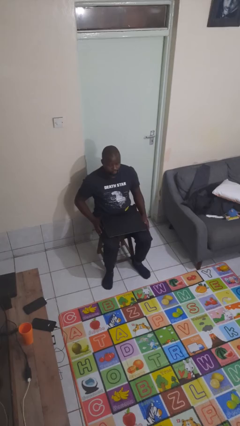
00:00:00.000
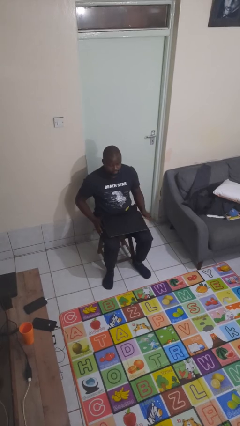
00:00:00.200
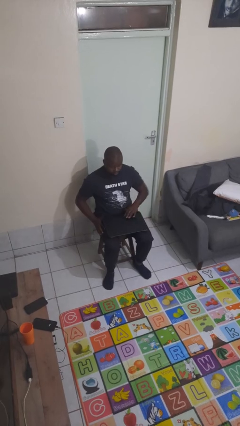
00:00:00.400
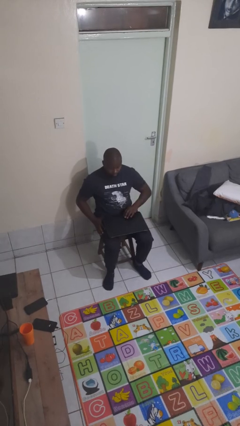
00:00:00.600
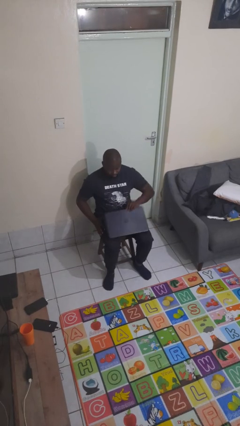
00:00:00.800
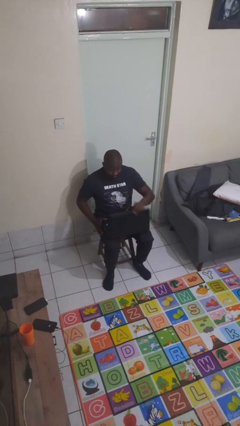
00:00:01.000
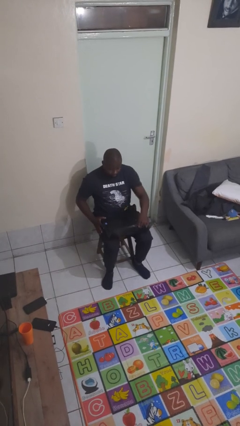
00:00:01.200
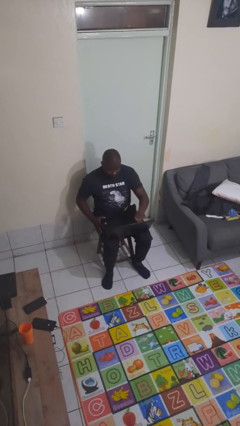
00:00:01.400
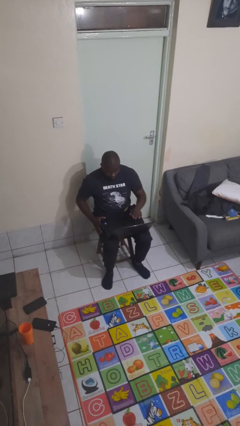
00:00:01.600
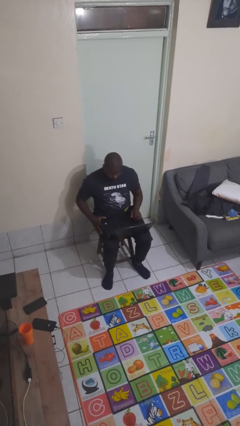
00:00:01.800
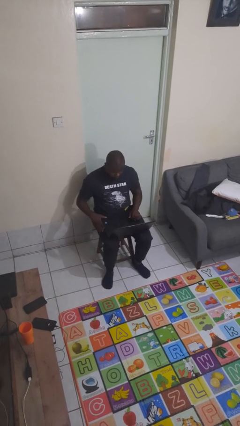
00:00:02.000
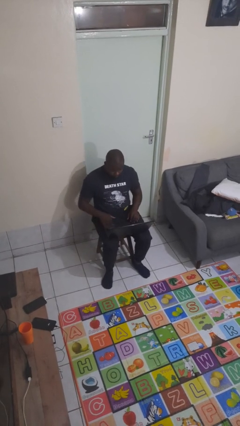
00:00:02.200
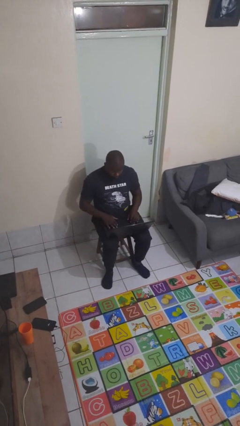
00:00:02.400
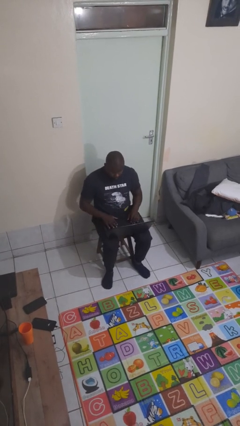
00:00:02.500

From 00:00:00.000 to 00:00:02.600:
person opens laptop

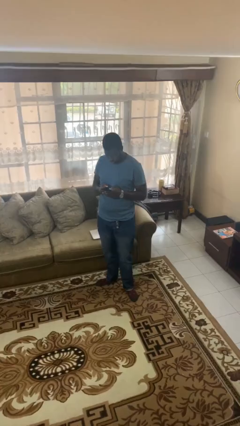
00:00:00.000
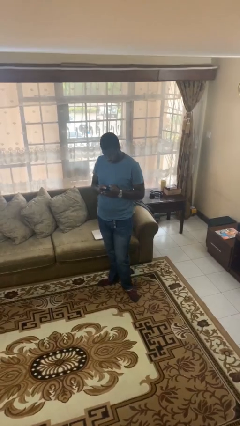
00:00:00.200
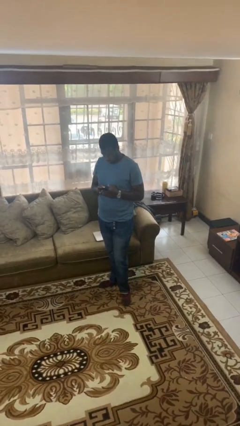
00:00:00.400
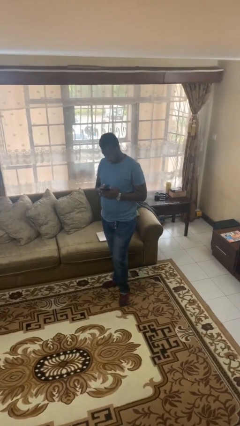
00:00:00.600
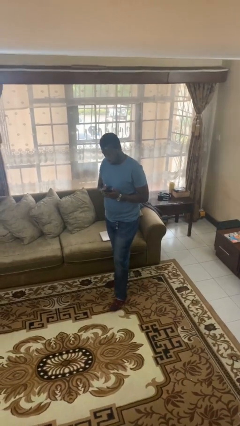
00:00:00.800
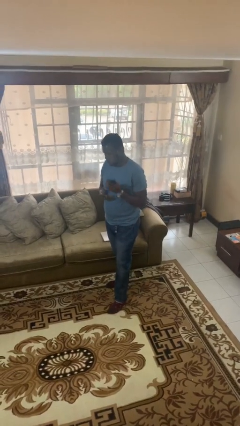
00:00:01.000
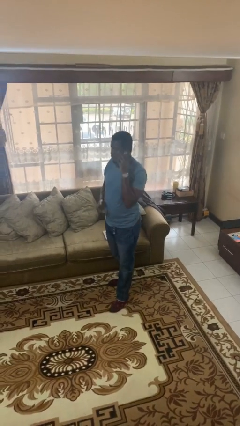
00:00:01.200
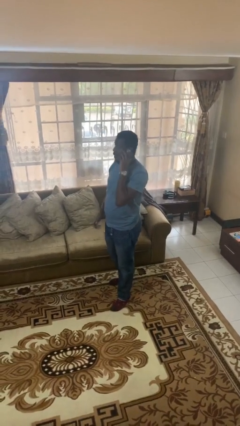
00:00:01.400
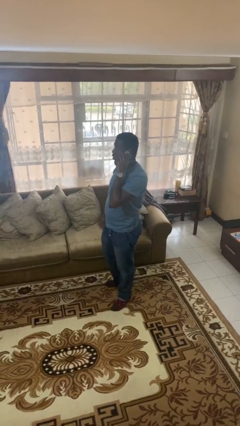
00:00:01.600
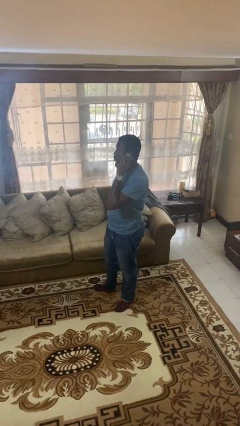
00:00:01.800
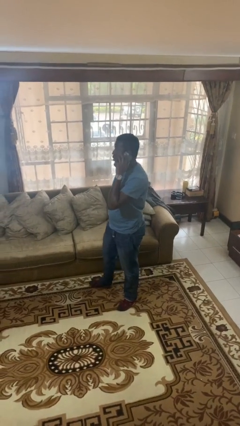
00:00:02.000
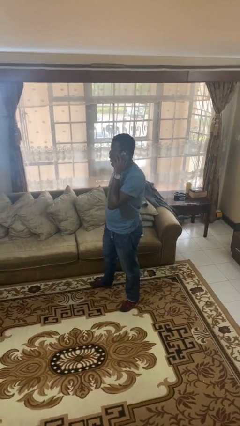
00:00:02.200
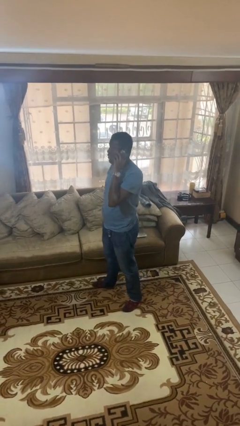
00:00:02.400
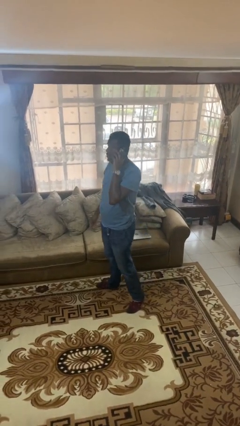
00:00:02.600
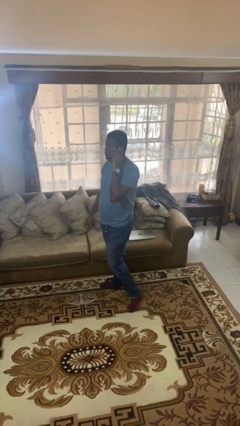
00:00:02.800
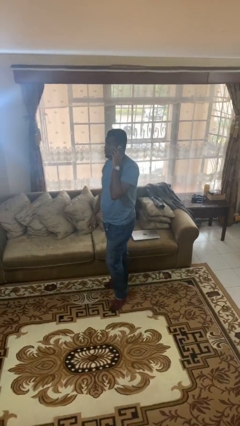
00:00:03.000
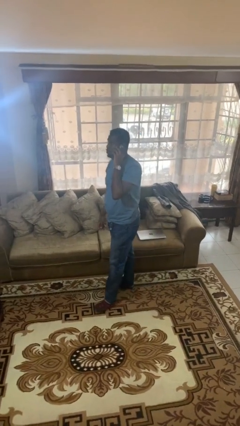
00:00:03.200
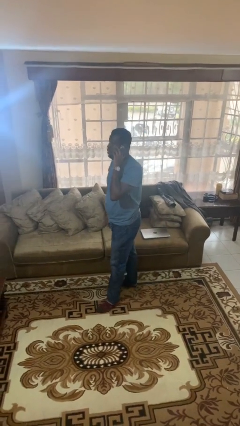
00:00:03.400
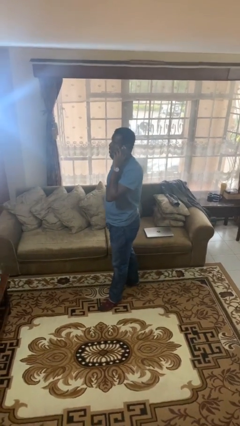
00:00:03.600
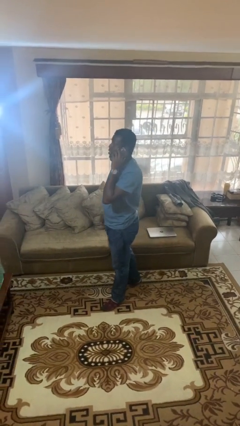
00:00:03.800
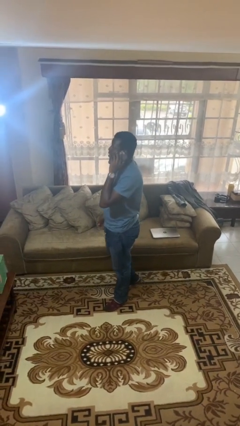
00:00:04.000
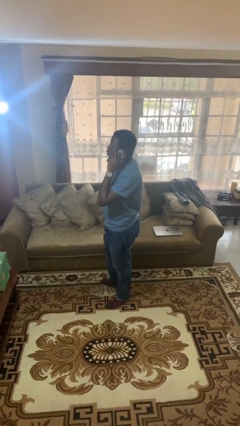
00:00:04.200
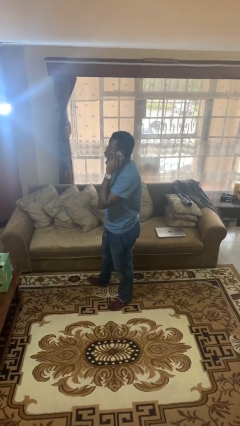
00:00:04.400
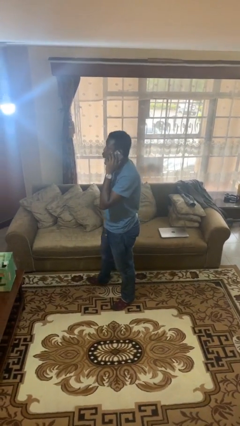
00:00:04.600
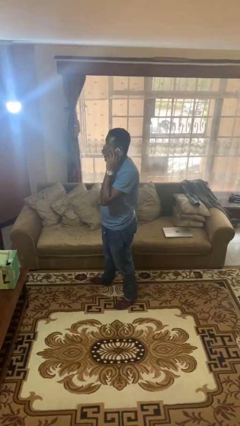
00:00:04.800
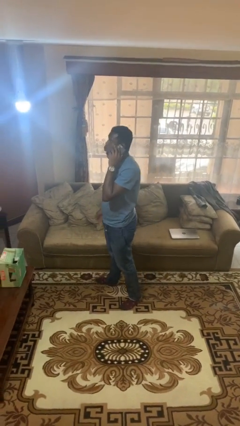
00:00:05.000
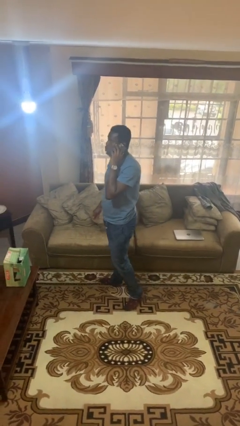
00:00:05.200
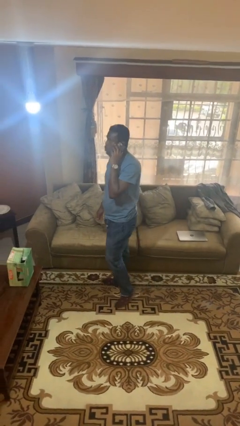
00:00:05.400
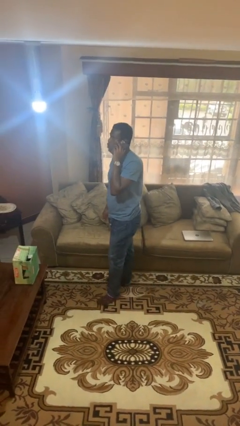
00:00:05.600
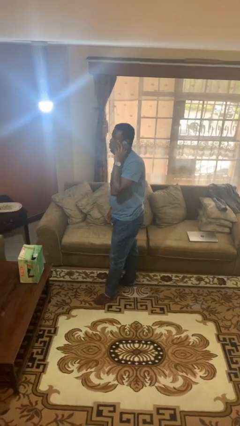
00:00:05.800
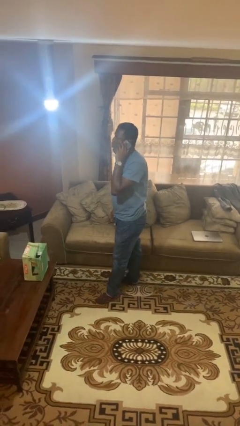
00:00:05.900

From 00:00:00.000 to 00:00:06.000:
person talks on phone

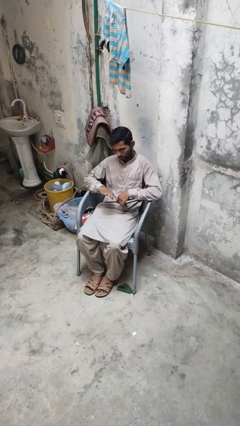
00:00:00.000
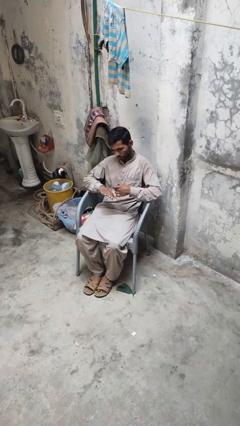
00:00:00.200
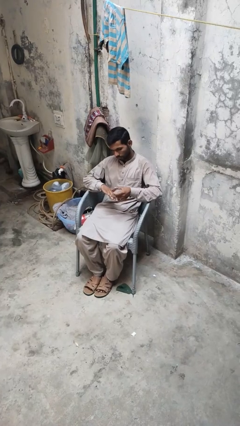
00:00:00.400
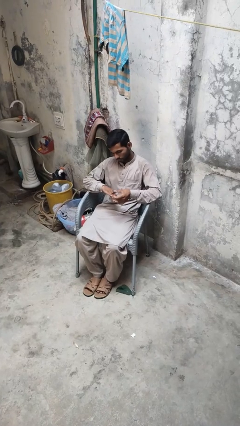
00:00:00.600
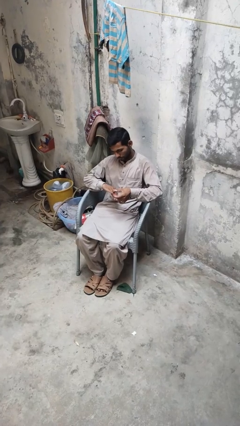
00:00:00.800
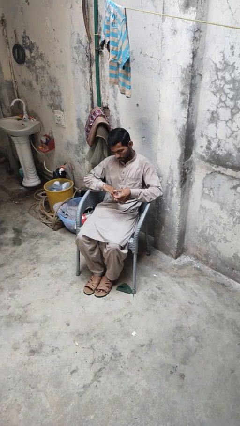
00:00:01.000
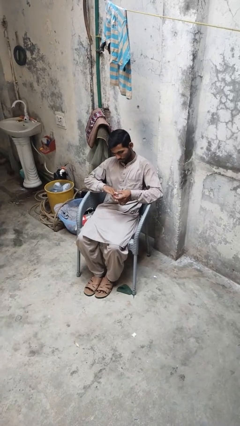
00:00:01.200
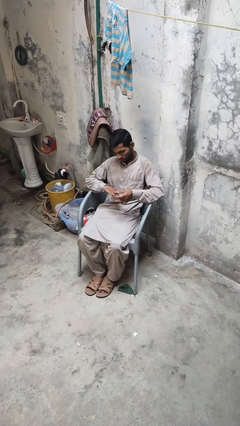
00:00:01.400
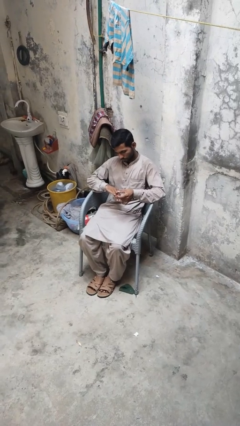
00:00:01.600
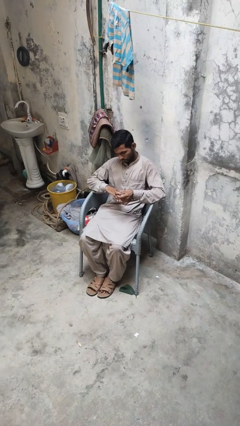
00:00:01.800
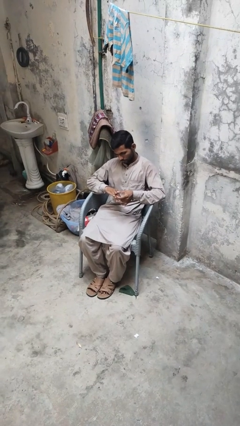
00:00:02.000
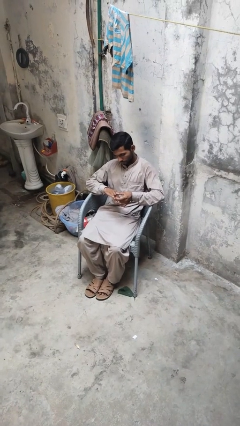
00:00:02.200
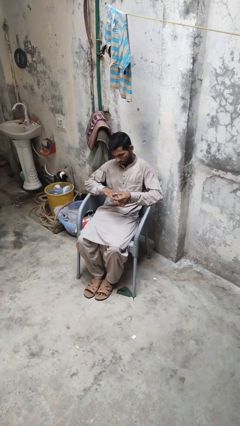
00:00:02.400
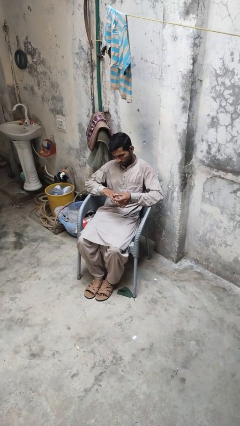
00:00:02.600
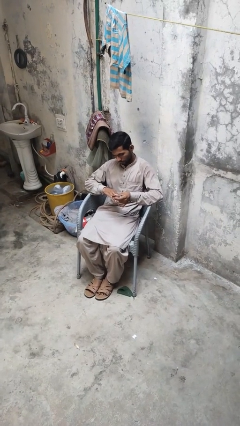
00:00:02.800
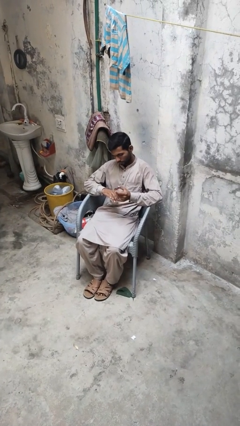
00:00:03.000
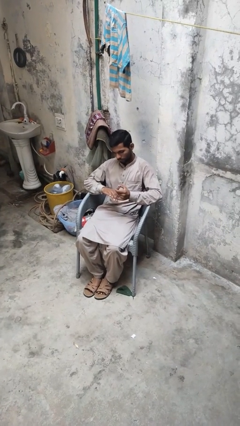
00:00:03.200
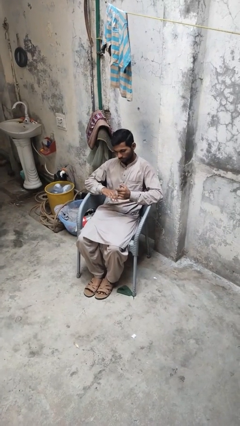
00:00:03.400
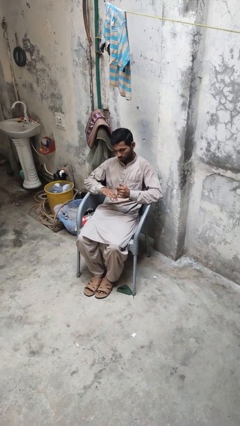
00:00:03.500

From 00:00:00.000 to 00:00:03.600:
person clips fingernails

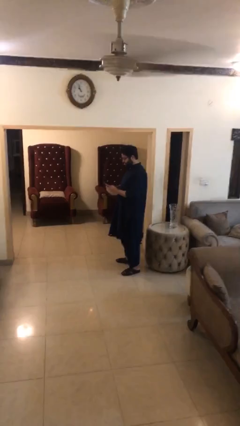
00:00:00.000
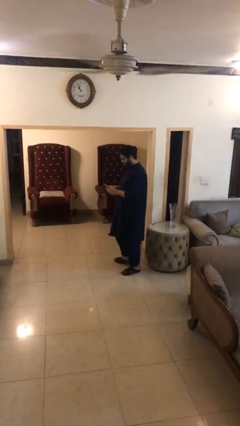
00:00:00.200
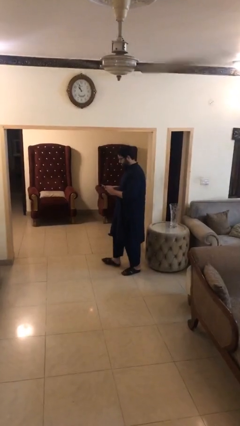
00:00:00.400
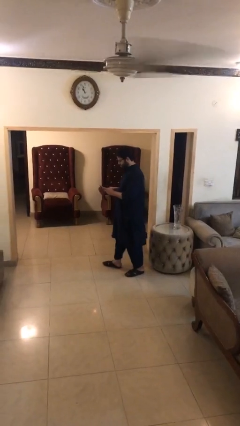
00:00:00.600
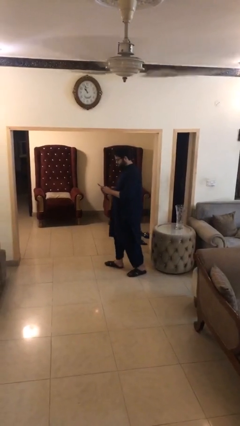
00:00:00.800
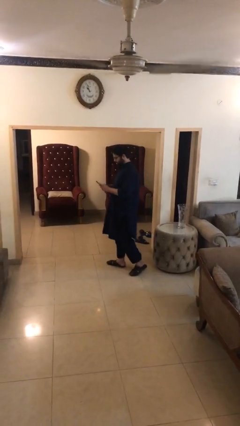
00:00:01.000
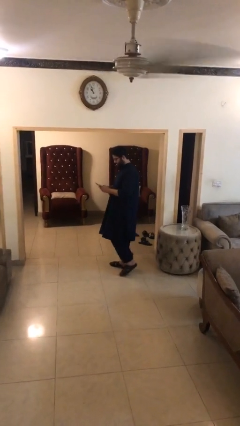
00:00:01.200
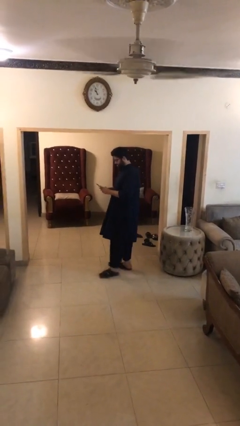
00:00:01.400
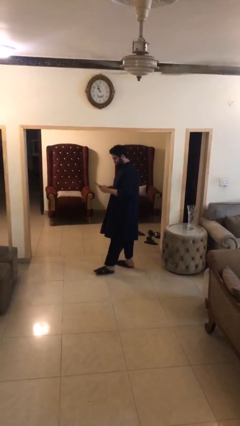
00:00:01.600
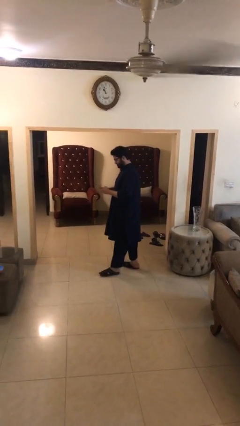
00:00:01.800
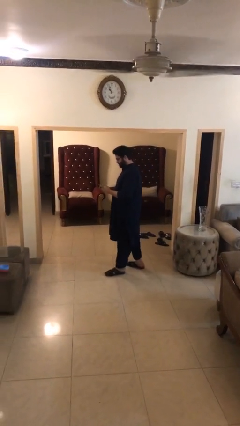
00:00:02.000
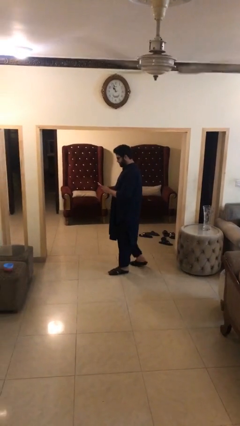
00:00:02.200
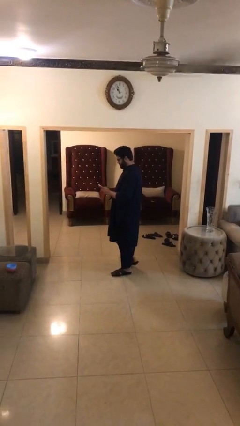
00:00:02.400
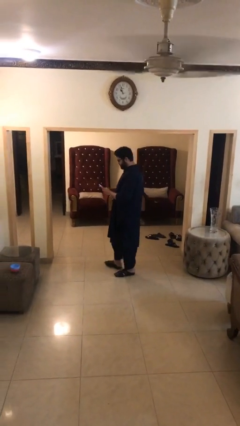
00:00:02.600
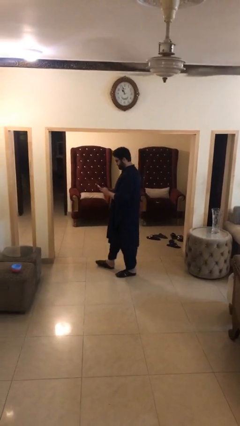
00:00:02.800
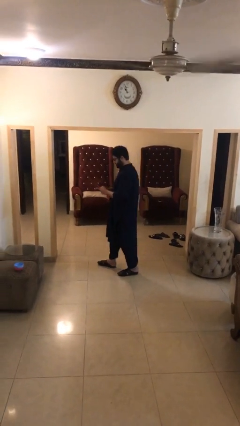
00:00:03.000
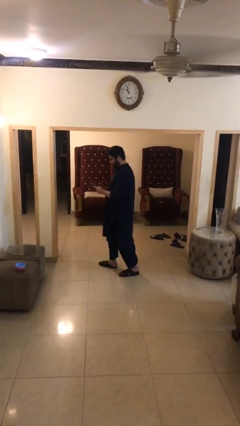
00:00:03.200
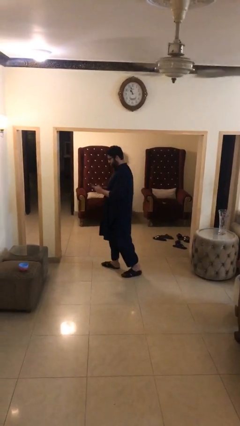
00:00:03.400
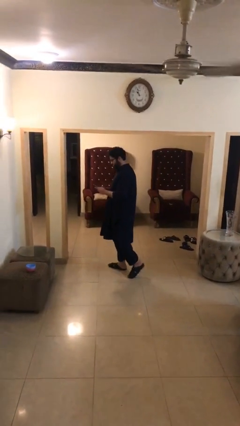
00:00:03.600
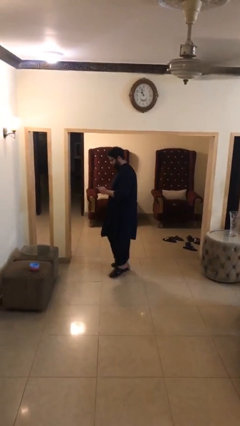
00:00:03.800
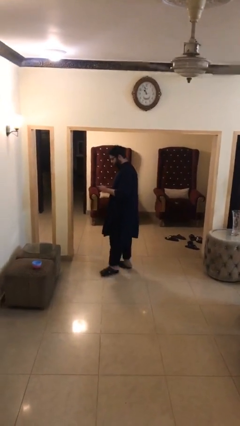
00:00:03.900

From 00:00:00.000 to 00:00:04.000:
person texts on phone

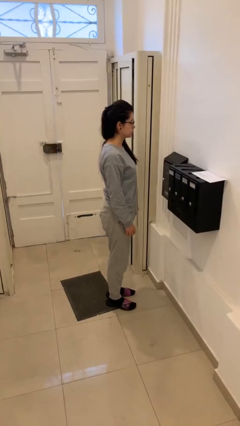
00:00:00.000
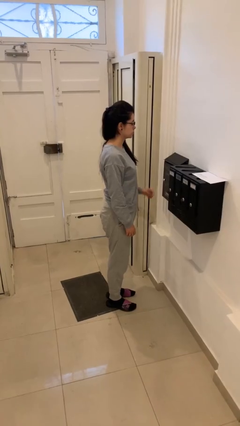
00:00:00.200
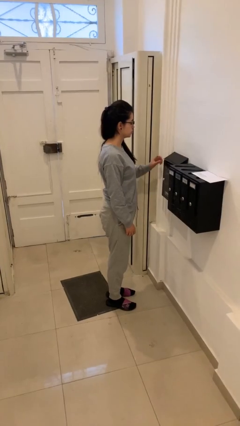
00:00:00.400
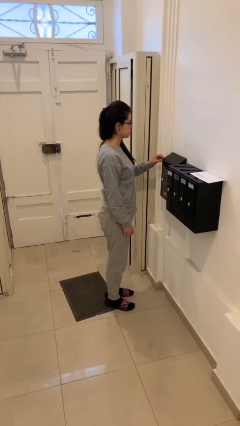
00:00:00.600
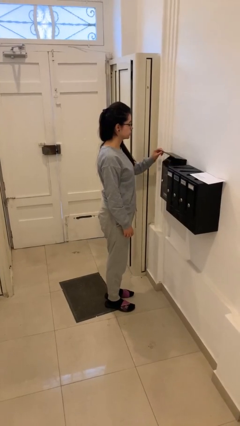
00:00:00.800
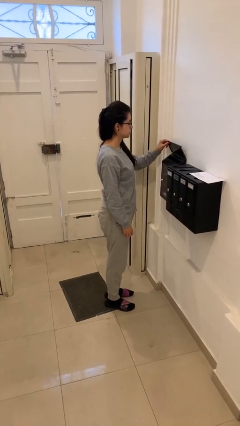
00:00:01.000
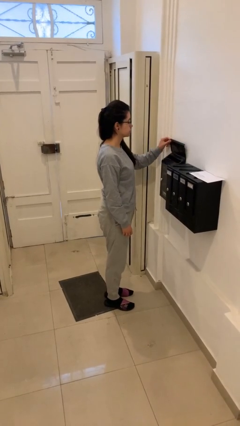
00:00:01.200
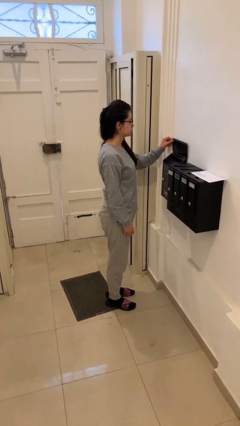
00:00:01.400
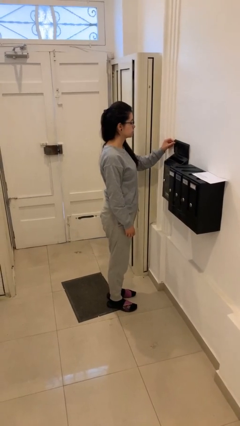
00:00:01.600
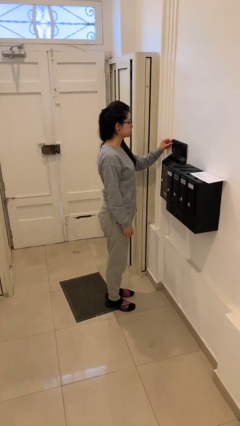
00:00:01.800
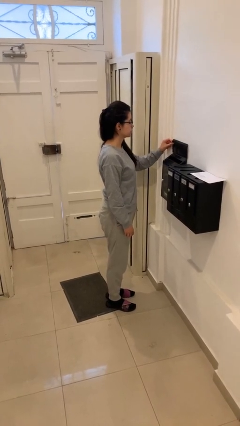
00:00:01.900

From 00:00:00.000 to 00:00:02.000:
person opens mailbox
